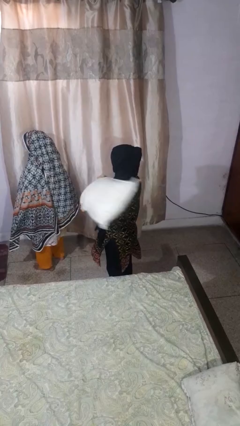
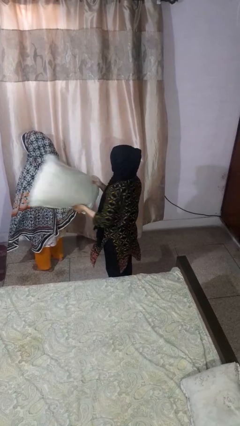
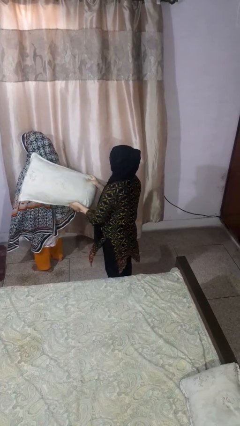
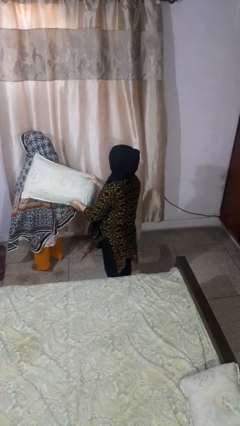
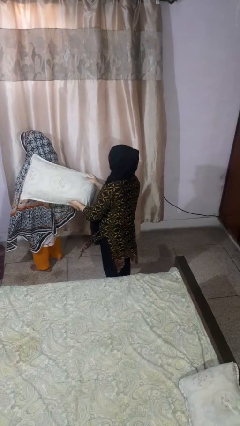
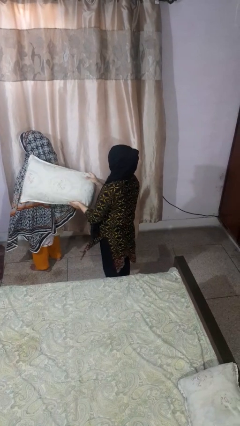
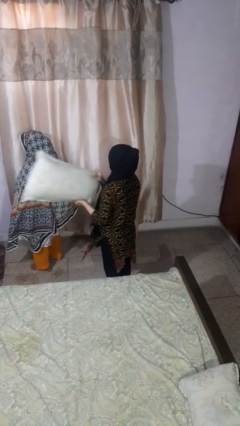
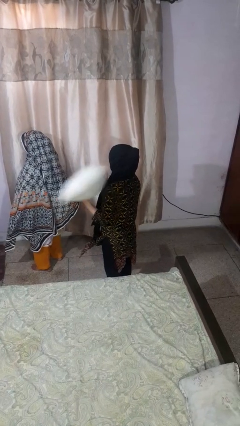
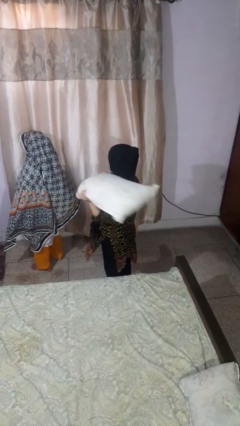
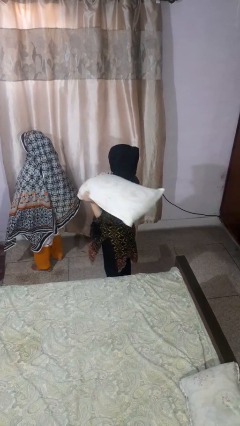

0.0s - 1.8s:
person hits person with pillow

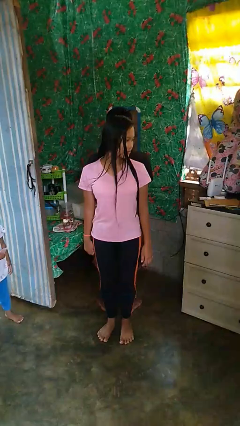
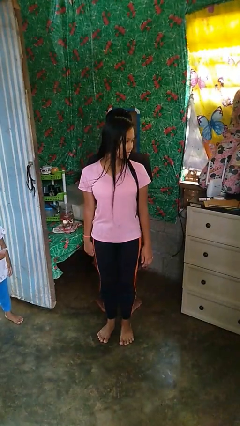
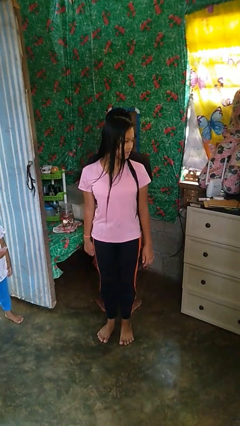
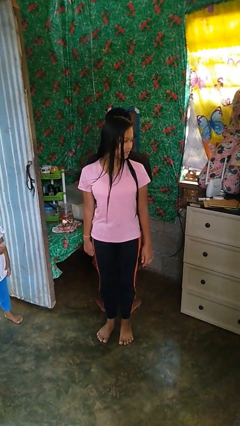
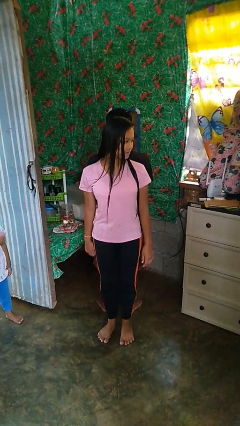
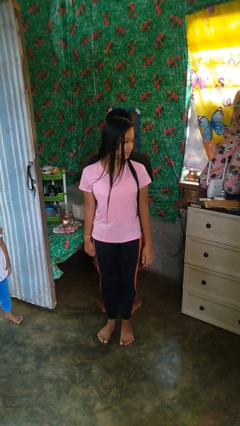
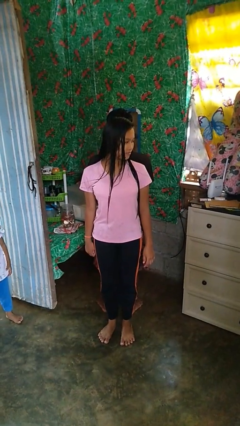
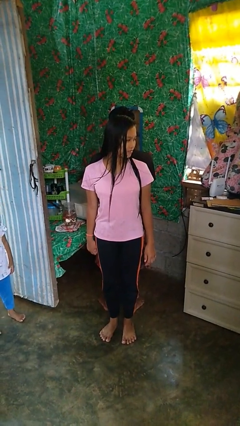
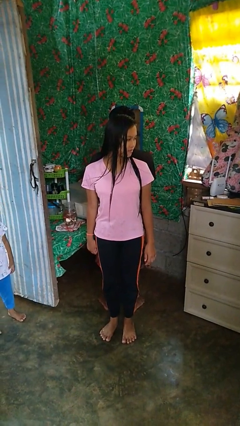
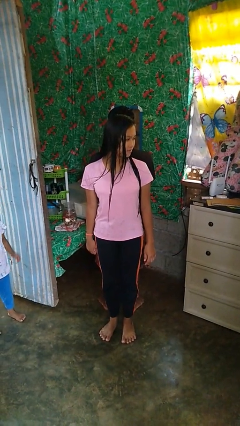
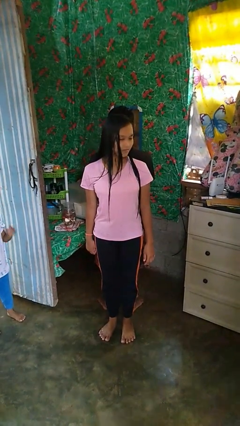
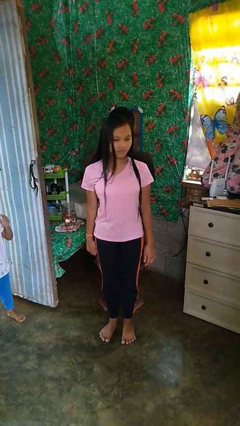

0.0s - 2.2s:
person looks over shoulder

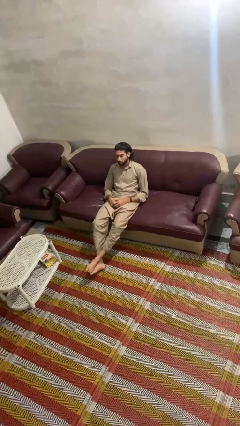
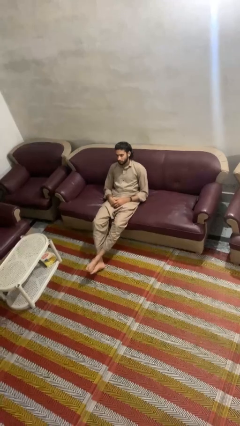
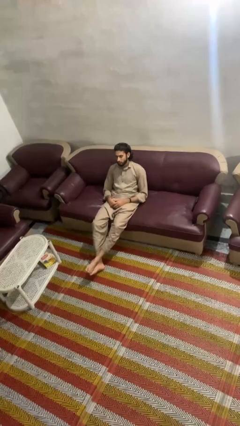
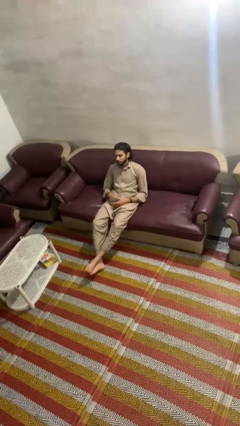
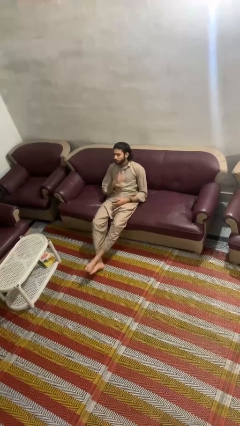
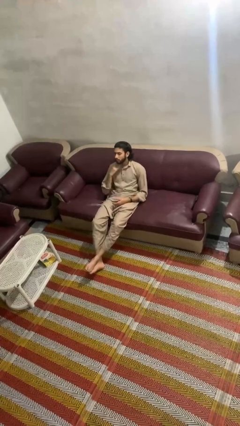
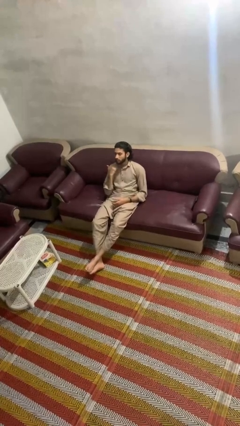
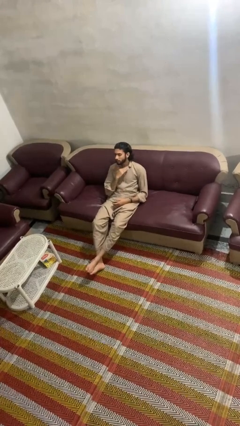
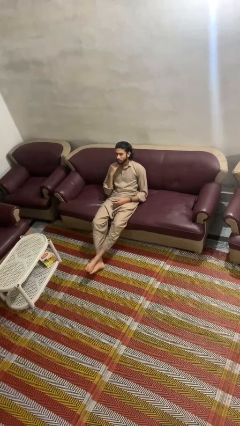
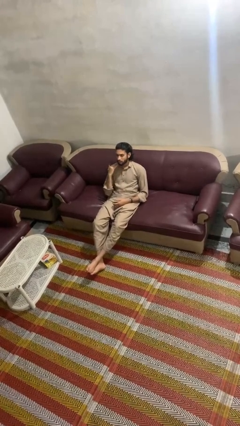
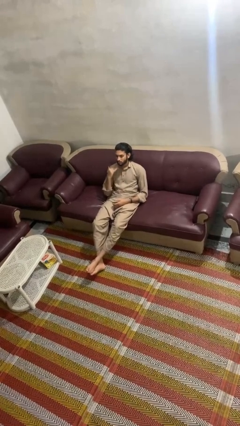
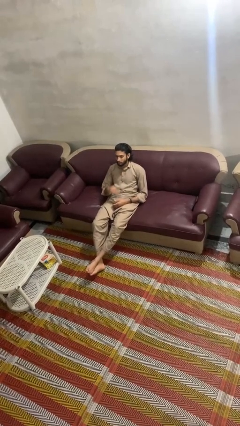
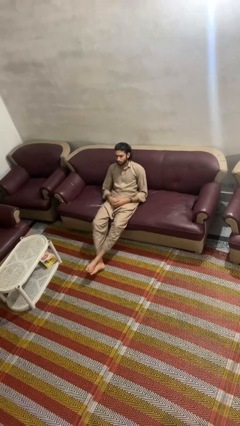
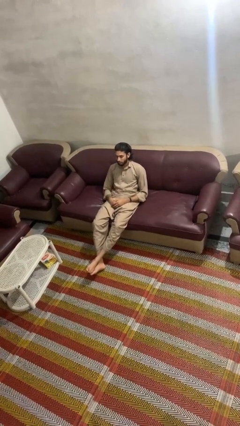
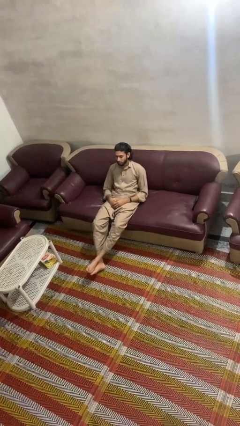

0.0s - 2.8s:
person gestures cut

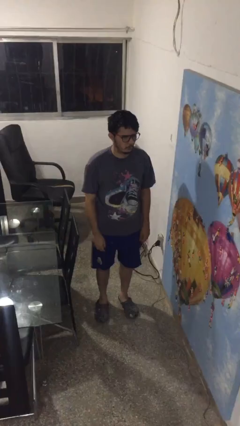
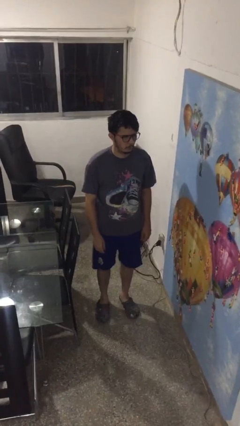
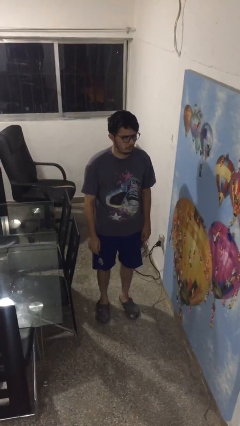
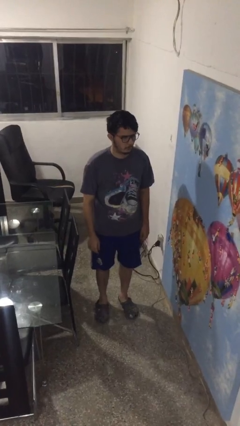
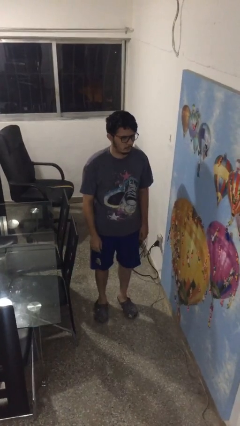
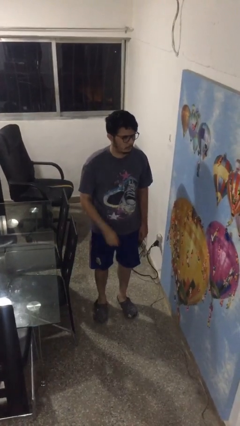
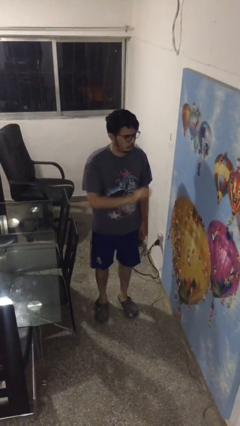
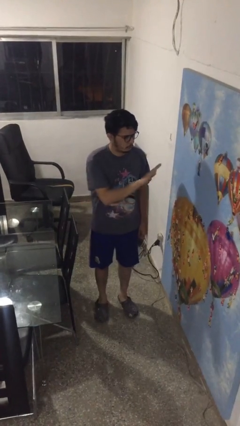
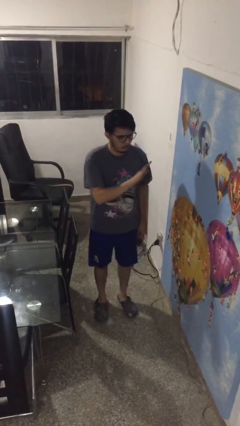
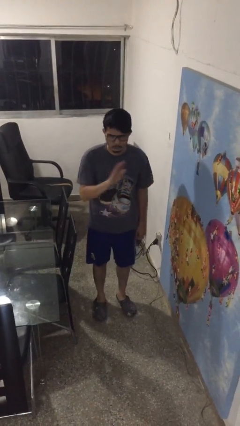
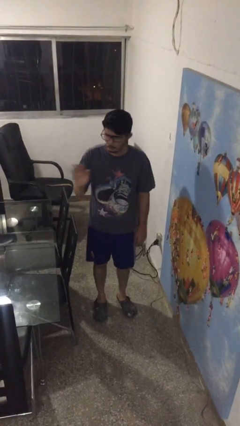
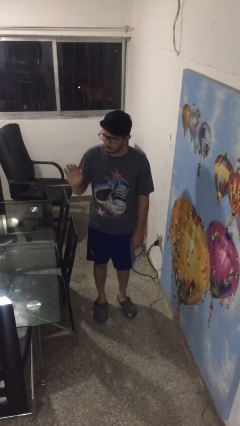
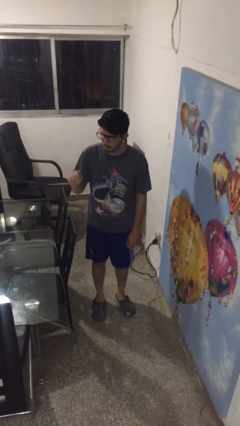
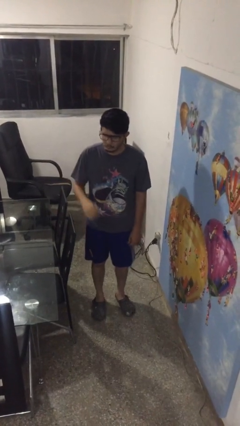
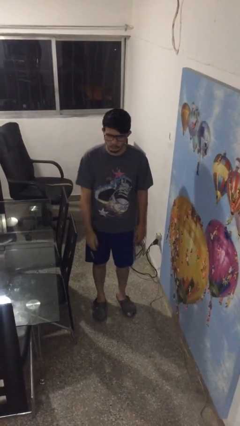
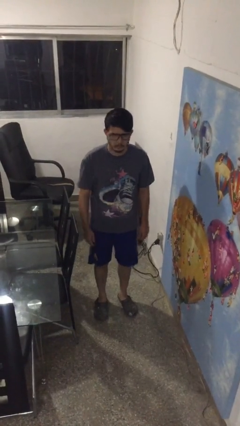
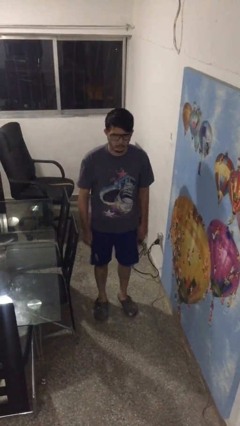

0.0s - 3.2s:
person gestures swipe right

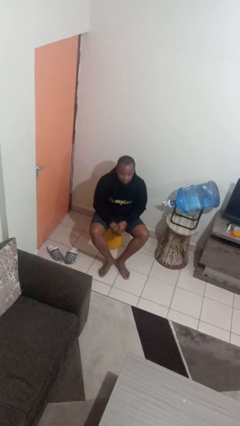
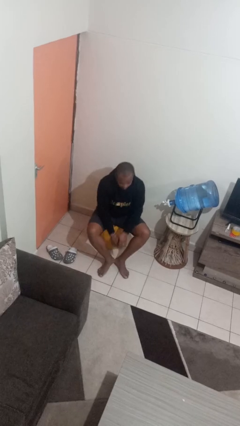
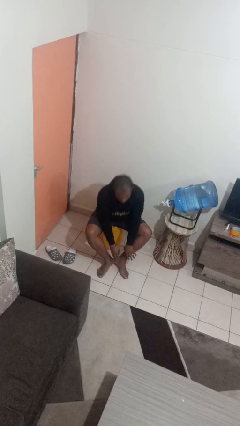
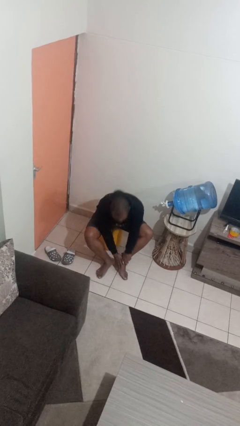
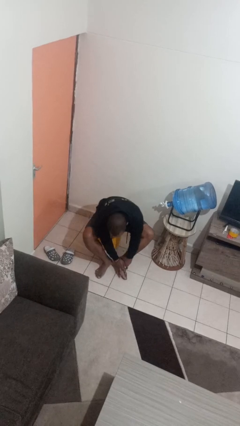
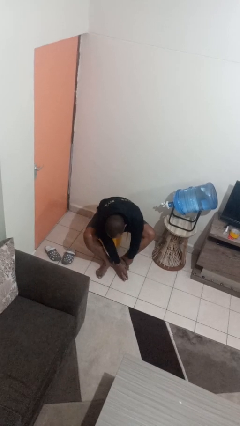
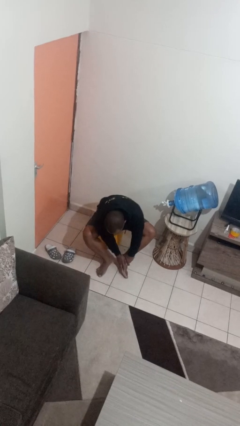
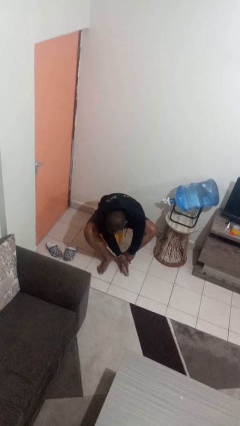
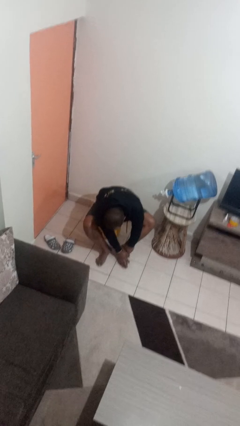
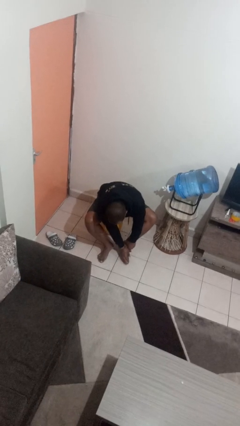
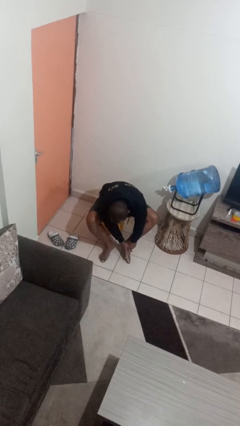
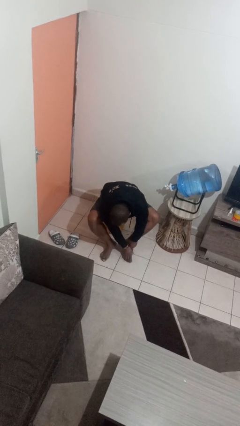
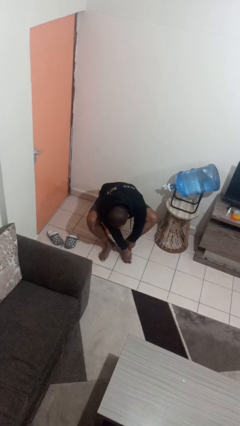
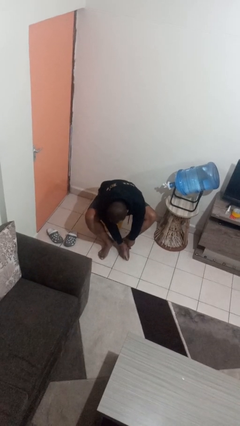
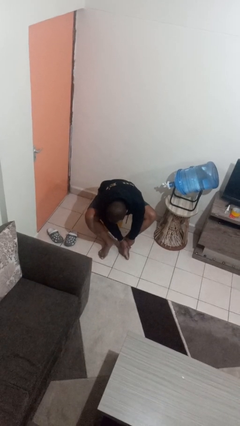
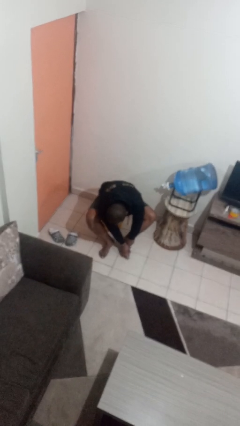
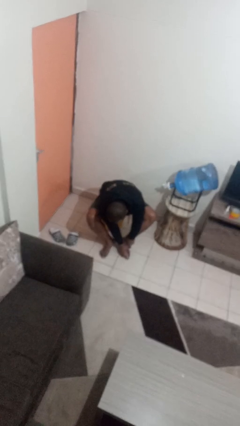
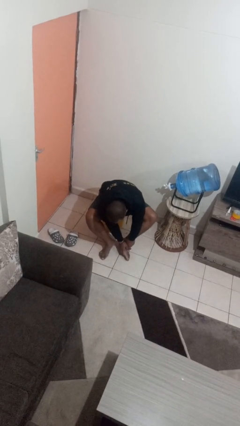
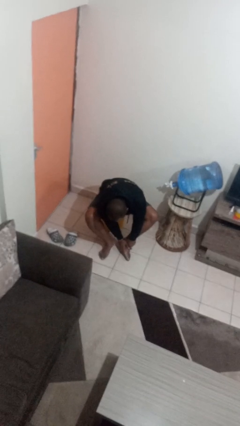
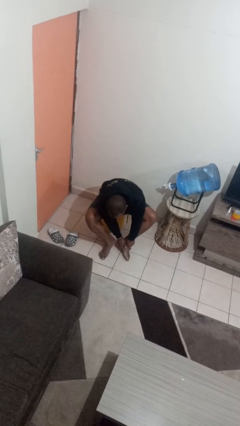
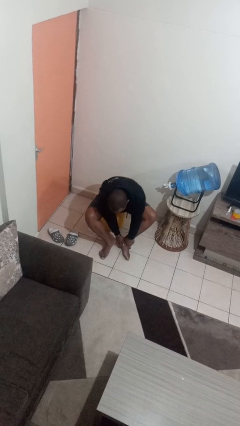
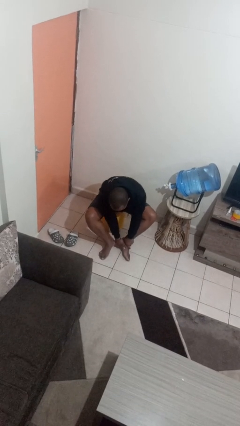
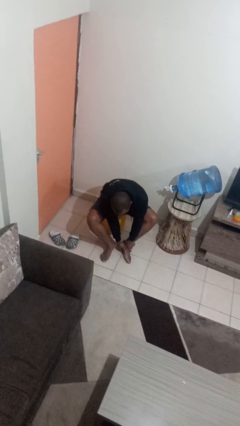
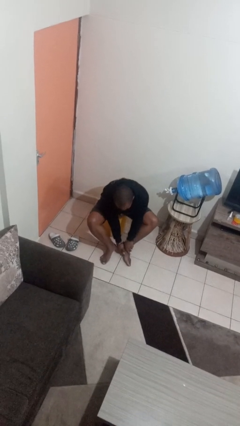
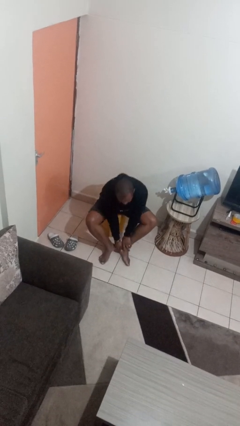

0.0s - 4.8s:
person rubs foot

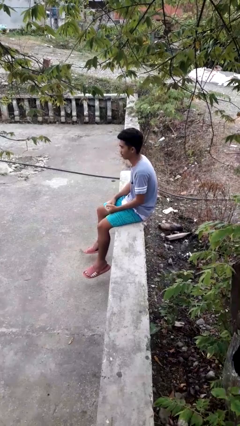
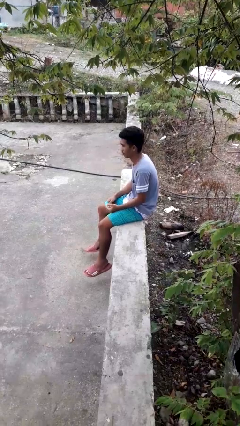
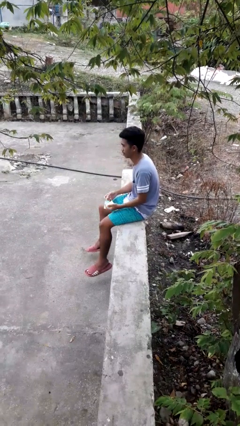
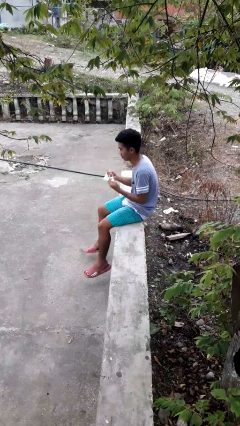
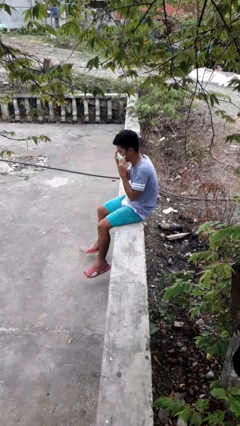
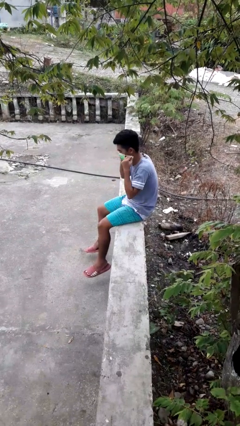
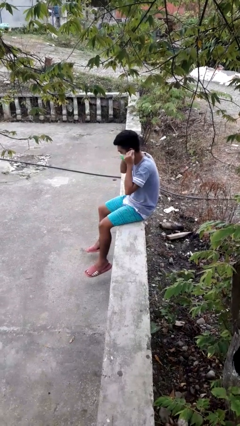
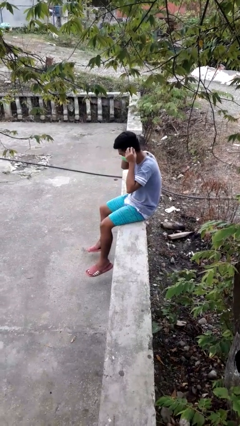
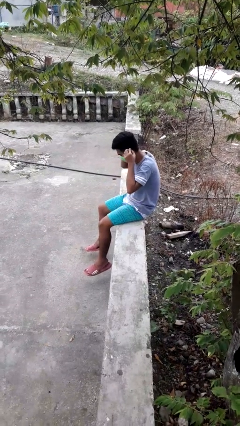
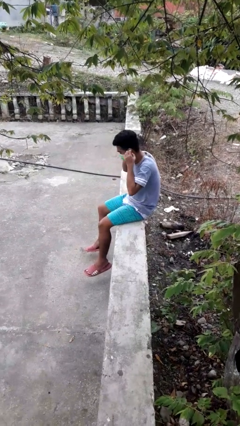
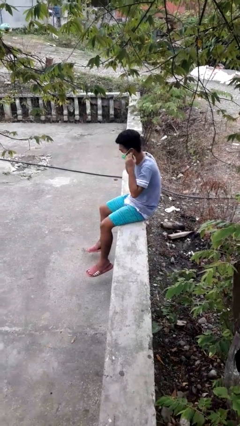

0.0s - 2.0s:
person puts on facemask

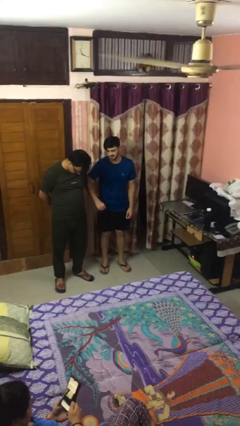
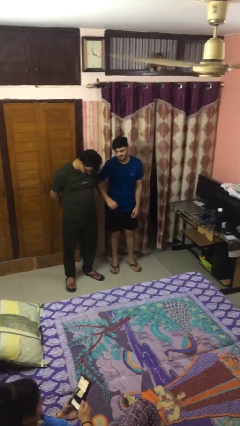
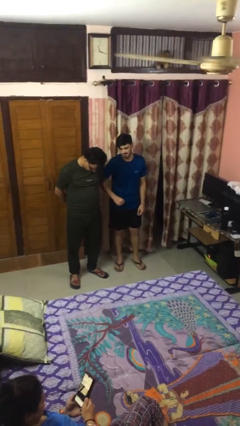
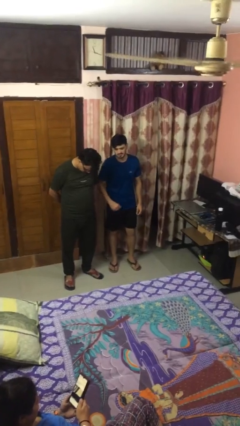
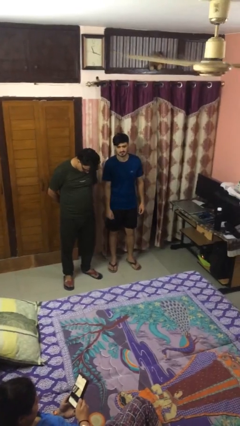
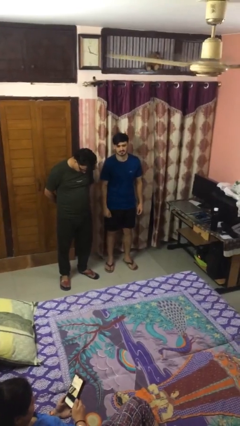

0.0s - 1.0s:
person nudges person with elbow
